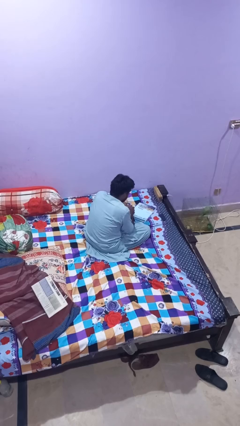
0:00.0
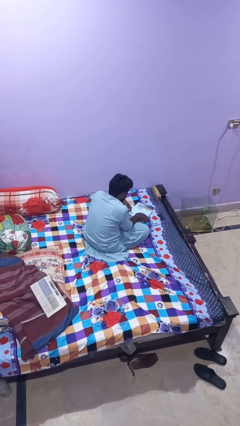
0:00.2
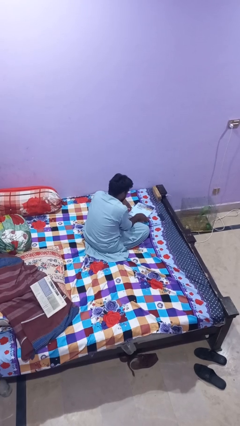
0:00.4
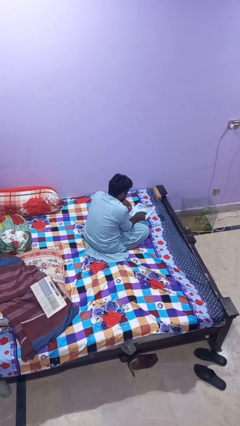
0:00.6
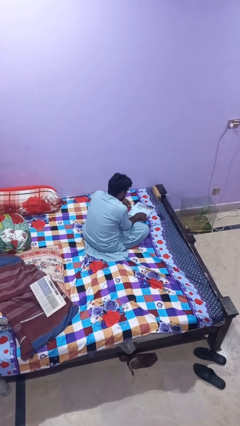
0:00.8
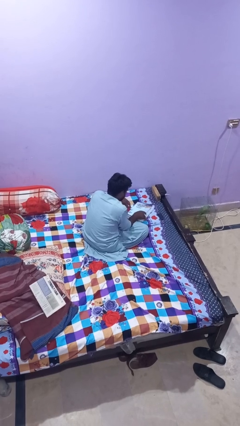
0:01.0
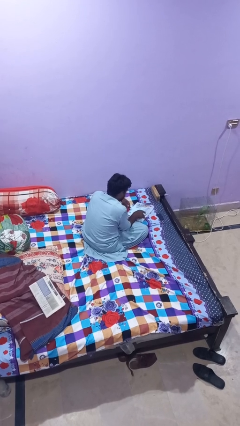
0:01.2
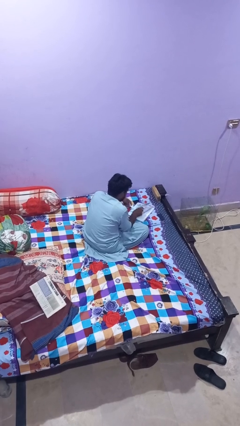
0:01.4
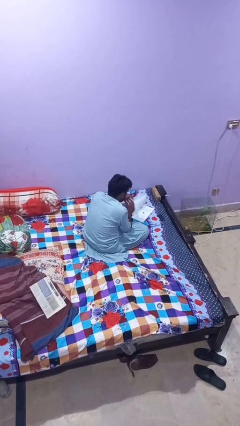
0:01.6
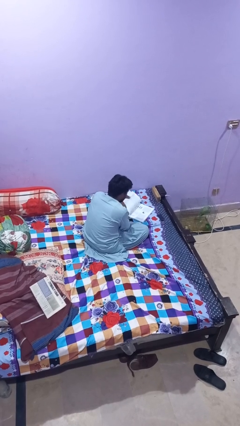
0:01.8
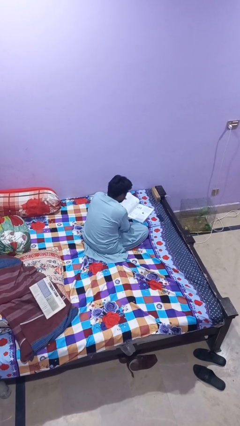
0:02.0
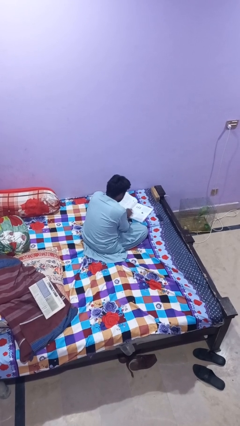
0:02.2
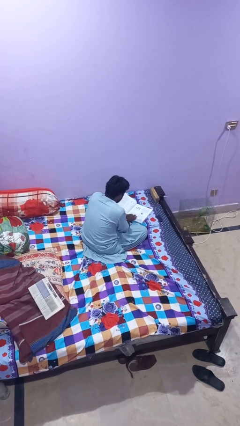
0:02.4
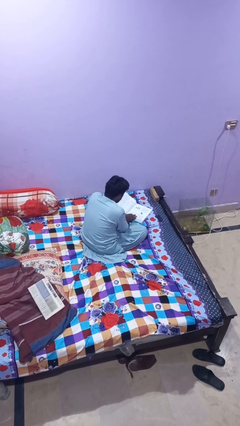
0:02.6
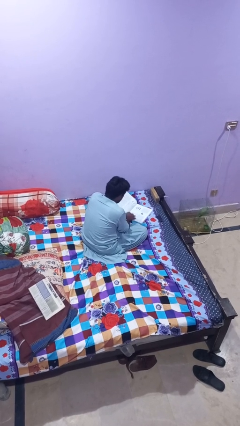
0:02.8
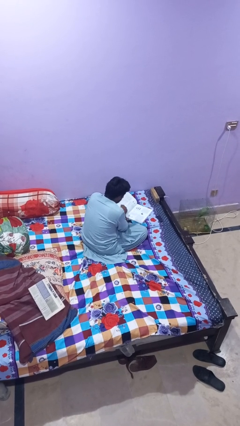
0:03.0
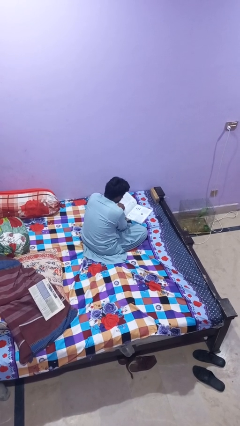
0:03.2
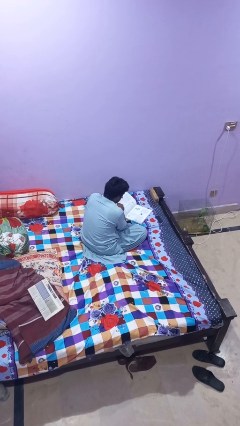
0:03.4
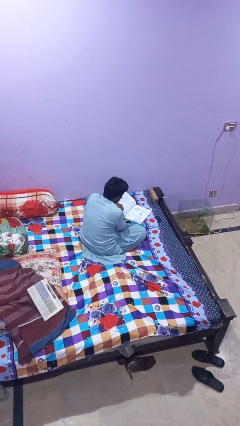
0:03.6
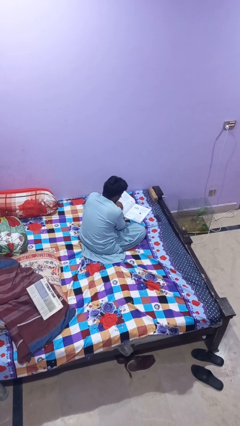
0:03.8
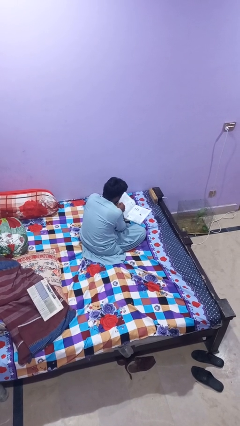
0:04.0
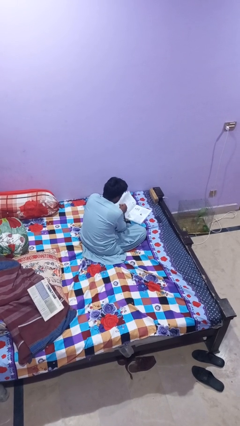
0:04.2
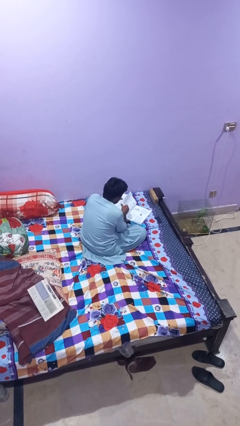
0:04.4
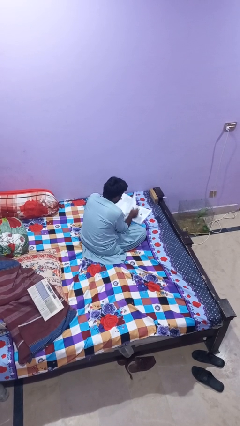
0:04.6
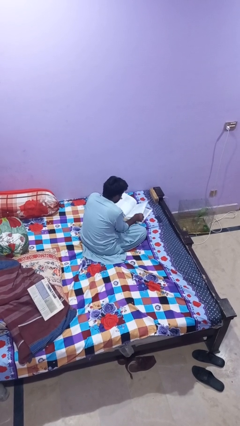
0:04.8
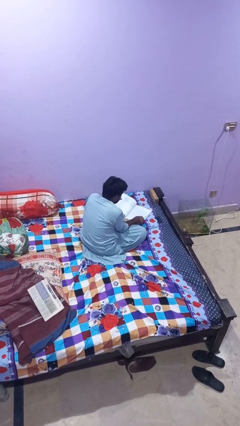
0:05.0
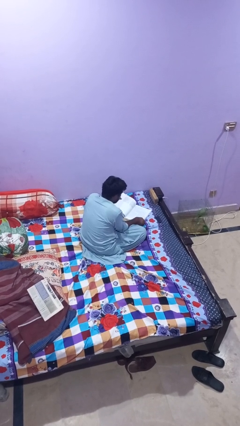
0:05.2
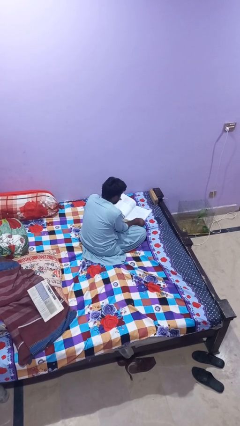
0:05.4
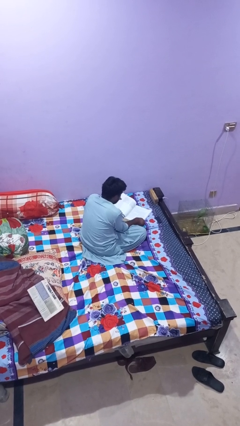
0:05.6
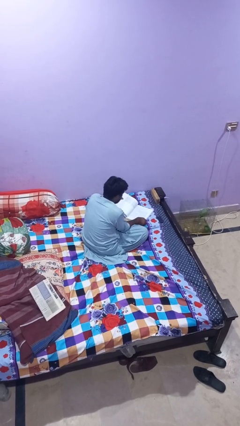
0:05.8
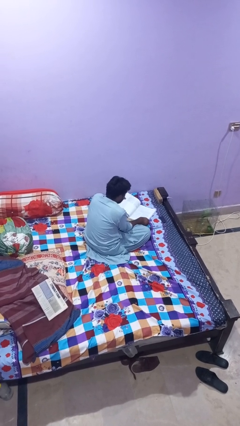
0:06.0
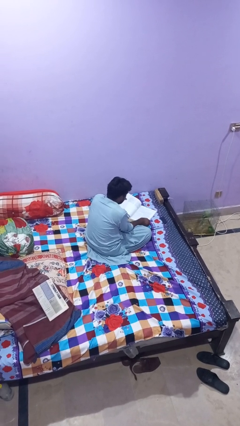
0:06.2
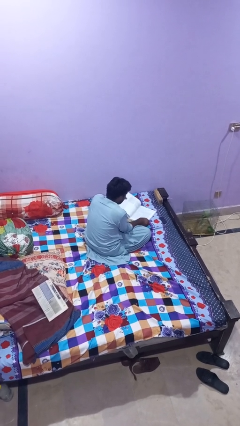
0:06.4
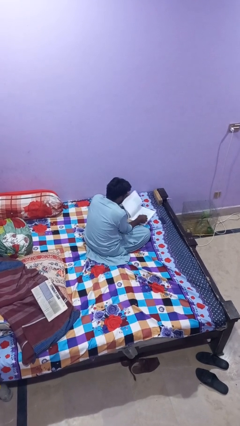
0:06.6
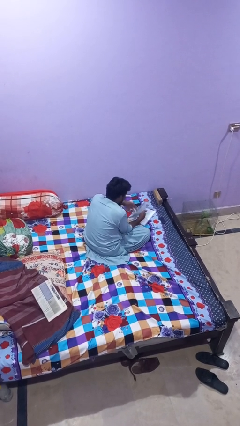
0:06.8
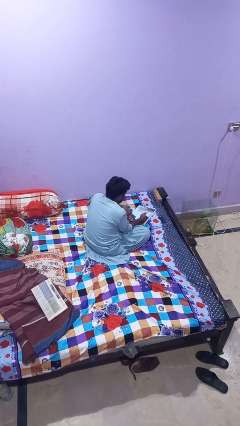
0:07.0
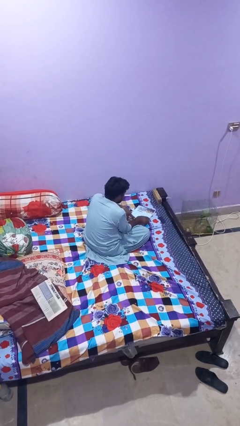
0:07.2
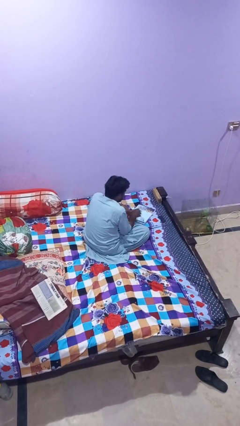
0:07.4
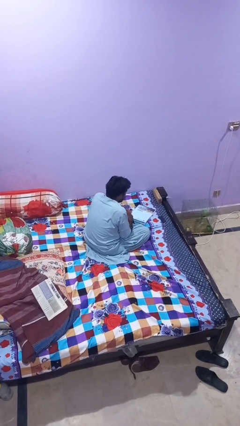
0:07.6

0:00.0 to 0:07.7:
person reads book

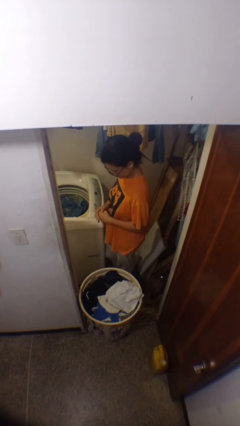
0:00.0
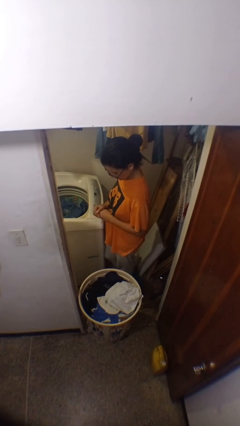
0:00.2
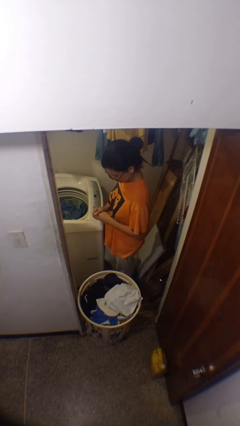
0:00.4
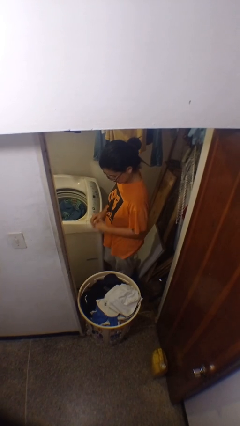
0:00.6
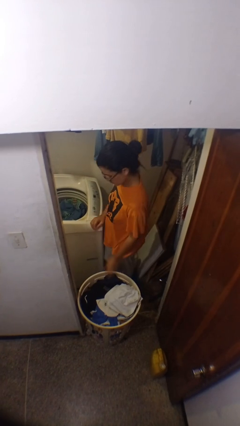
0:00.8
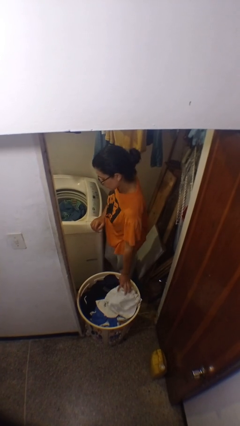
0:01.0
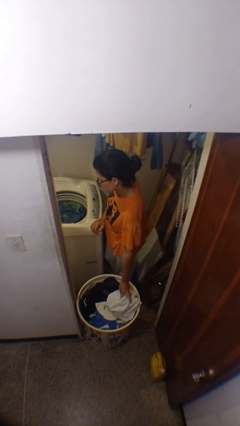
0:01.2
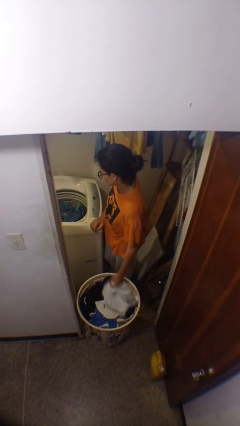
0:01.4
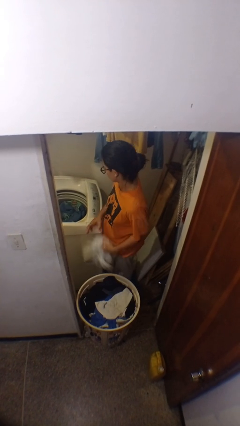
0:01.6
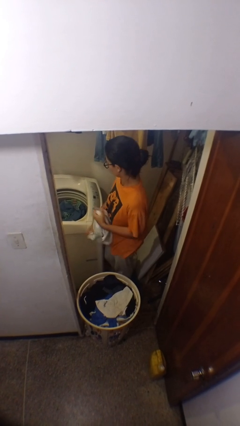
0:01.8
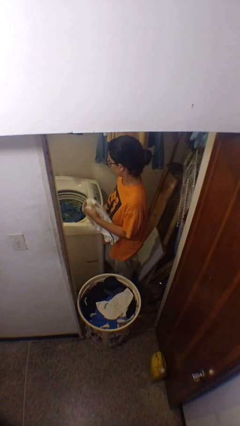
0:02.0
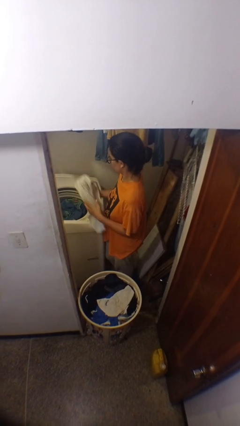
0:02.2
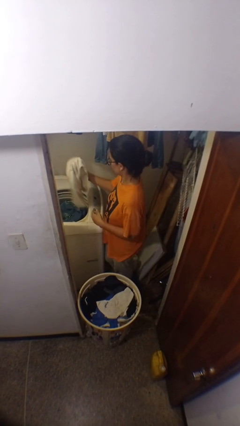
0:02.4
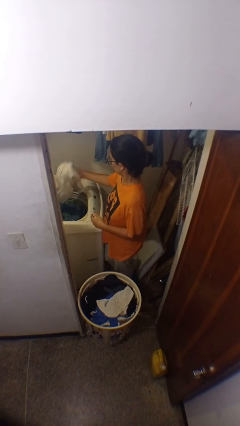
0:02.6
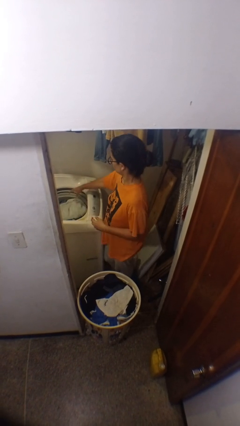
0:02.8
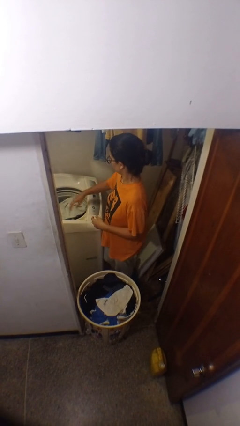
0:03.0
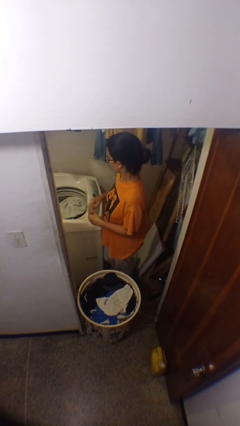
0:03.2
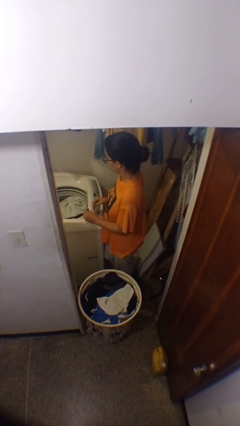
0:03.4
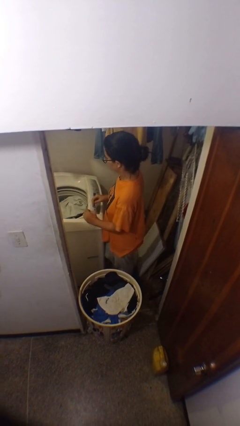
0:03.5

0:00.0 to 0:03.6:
person loads clotheswasher

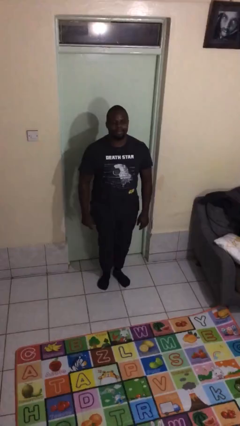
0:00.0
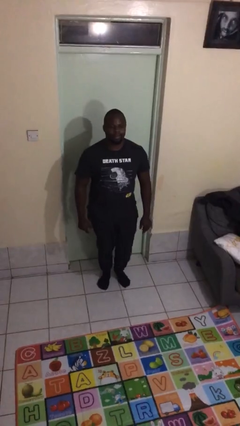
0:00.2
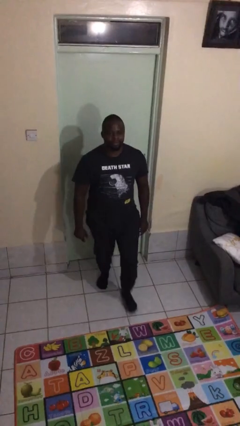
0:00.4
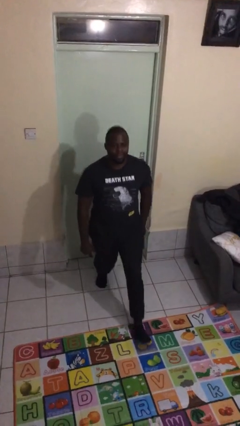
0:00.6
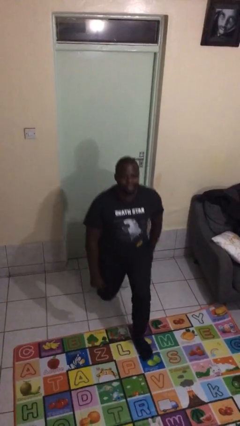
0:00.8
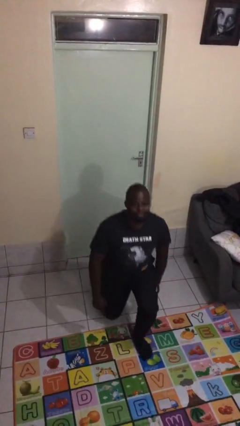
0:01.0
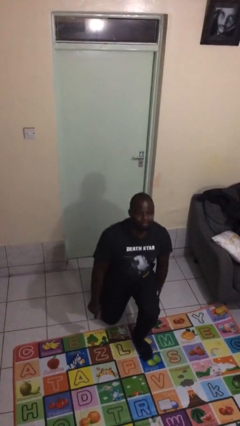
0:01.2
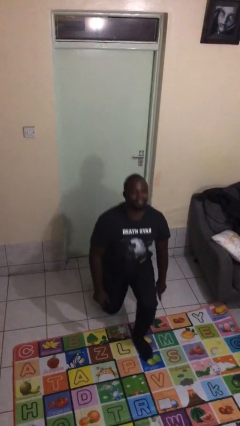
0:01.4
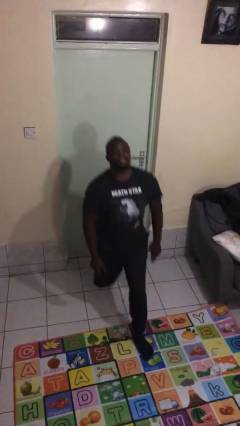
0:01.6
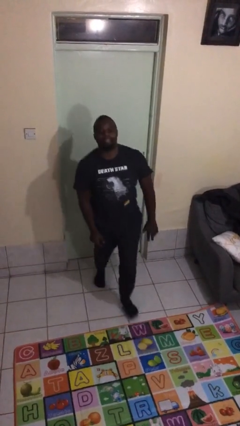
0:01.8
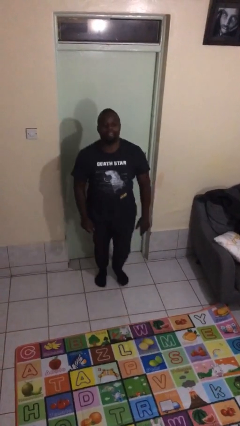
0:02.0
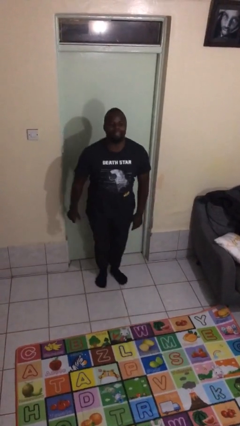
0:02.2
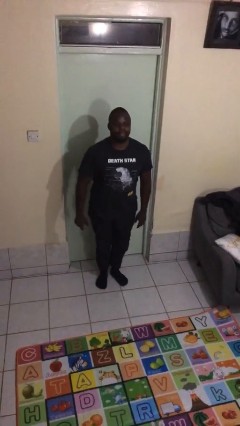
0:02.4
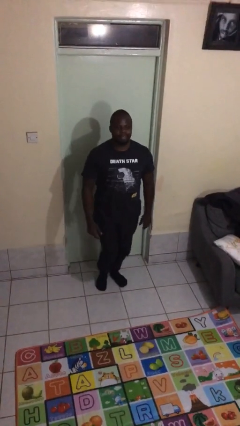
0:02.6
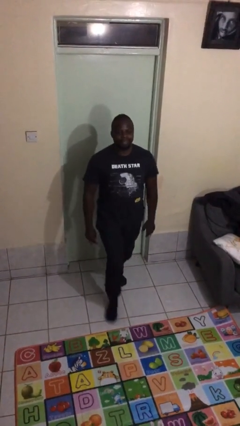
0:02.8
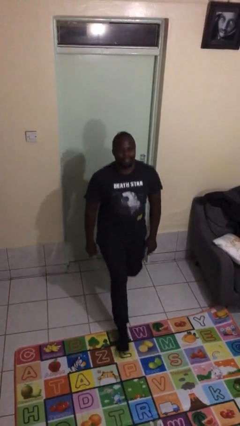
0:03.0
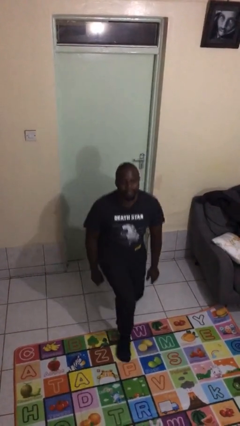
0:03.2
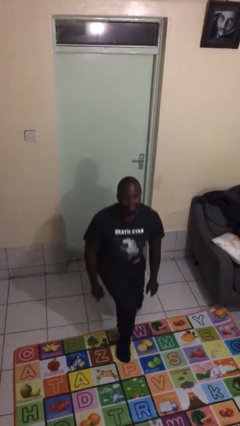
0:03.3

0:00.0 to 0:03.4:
person exercises with lunges

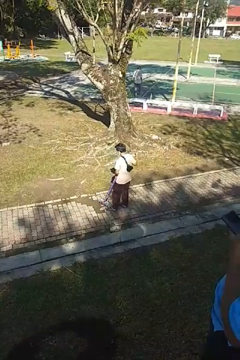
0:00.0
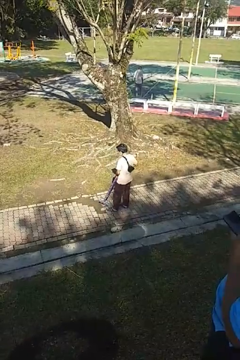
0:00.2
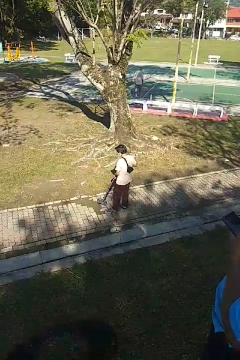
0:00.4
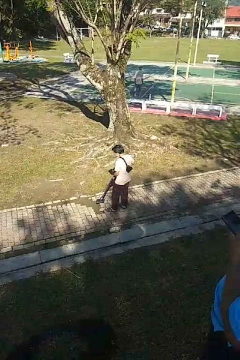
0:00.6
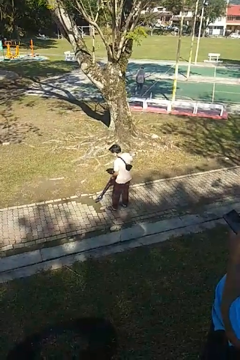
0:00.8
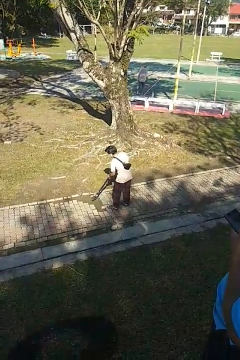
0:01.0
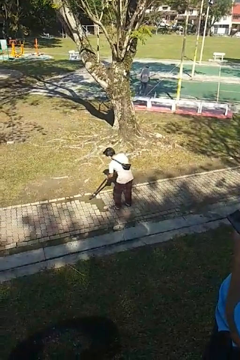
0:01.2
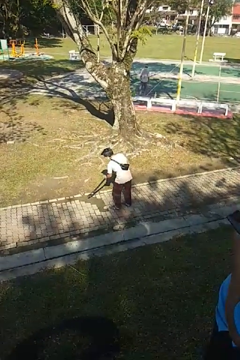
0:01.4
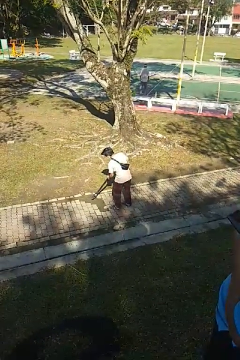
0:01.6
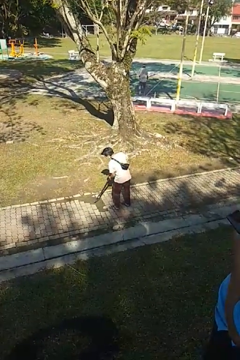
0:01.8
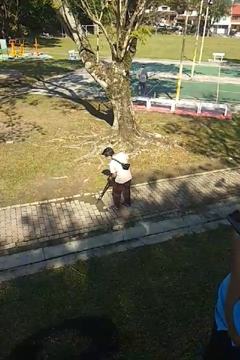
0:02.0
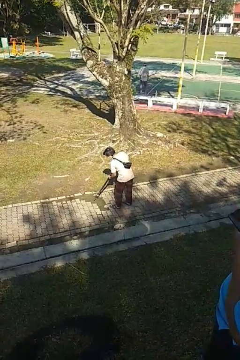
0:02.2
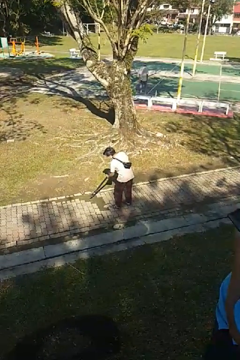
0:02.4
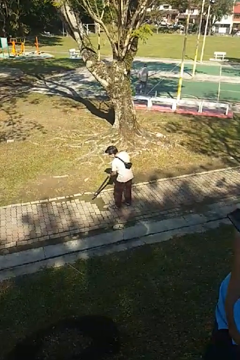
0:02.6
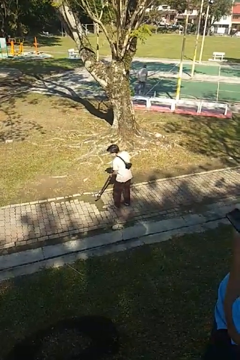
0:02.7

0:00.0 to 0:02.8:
person vacuums carpet

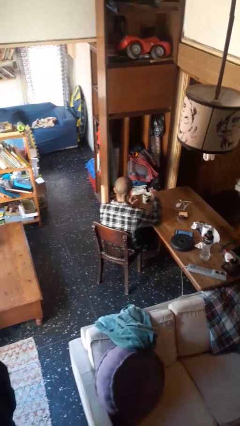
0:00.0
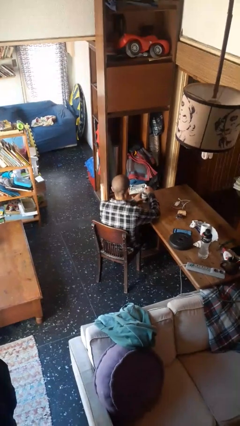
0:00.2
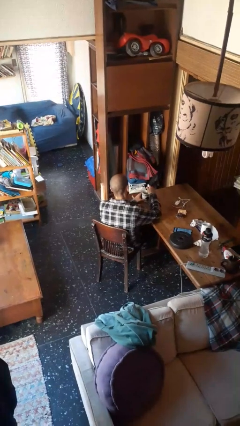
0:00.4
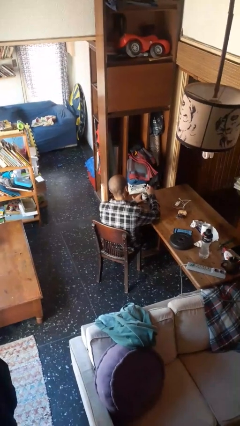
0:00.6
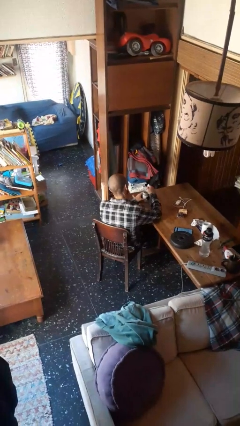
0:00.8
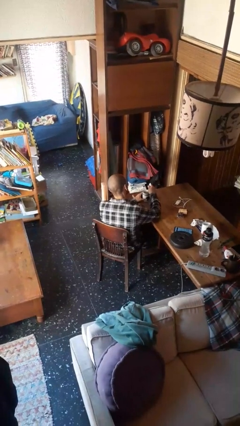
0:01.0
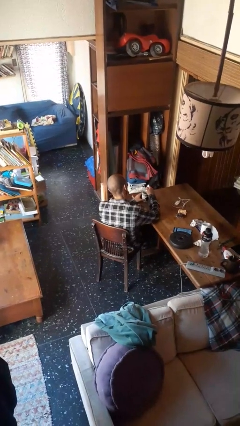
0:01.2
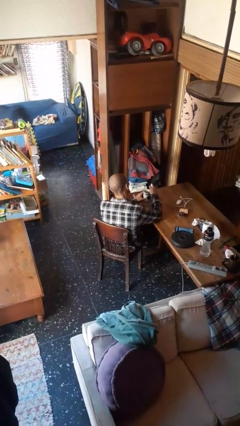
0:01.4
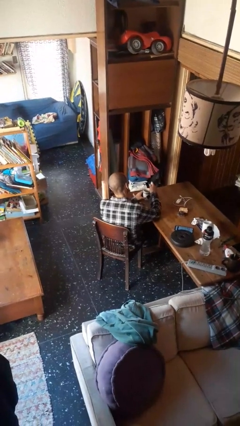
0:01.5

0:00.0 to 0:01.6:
person stirs mug
